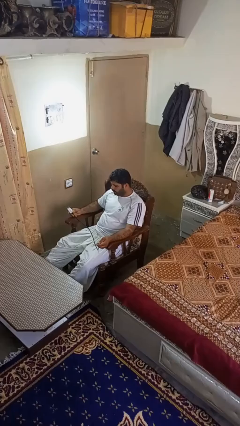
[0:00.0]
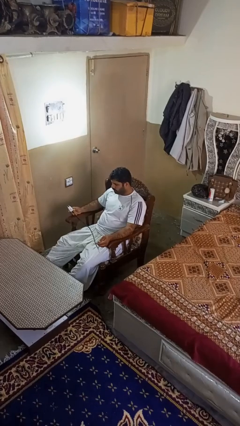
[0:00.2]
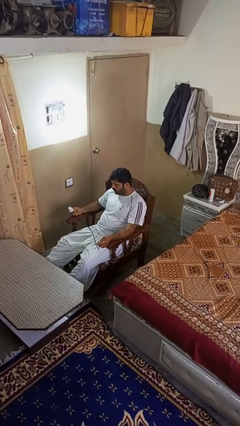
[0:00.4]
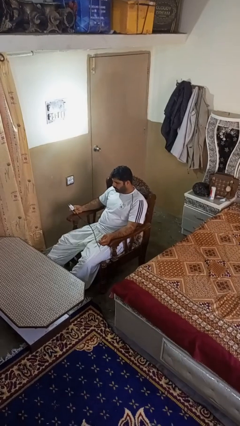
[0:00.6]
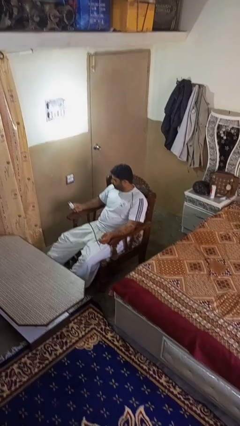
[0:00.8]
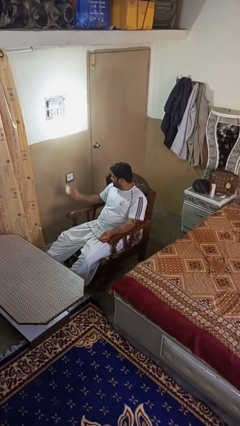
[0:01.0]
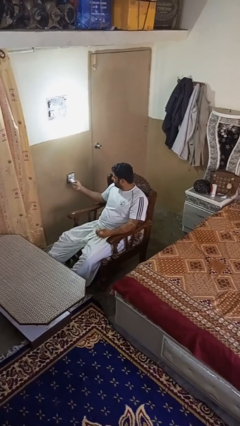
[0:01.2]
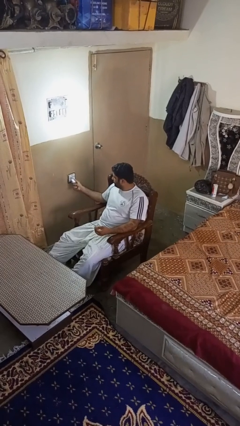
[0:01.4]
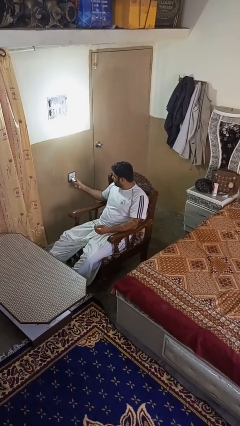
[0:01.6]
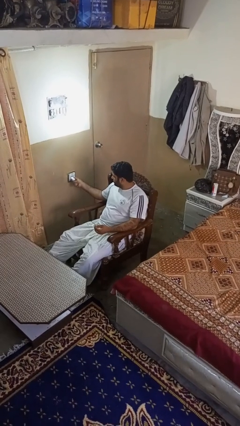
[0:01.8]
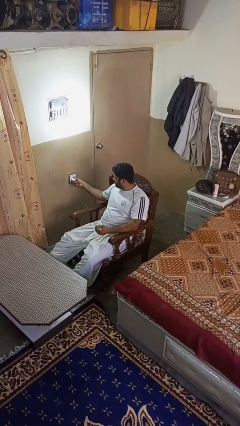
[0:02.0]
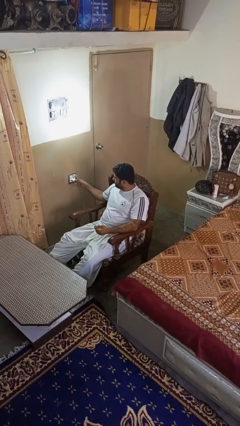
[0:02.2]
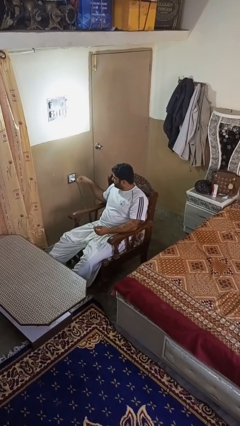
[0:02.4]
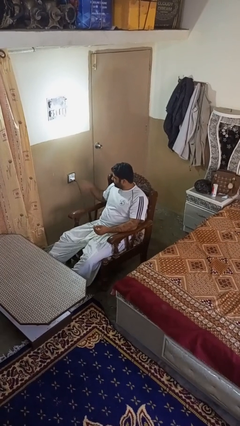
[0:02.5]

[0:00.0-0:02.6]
person plugs into electrical socket

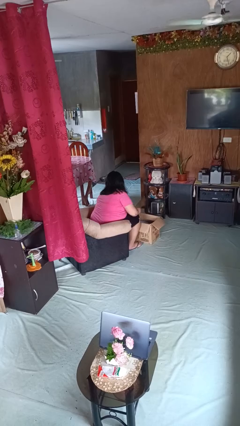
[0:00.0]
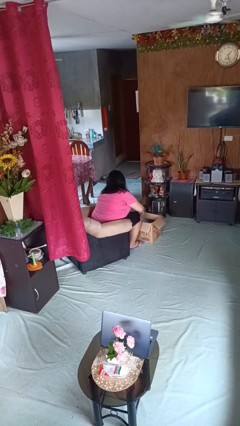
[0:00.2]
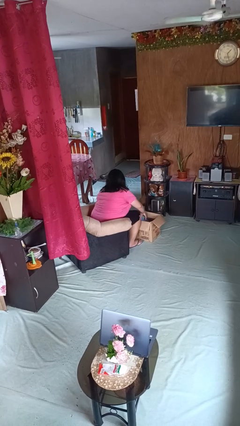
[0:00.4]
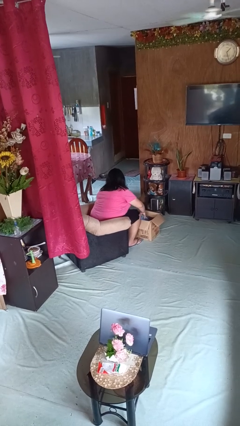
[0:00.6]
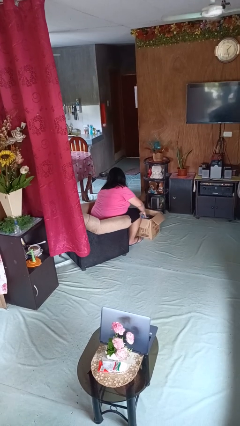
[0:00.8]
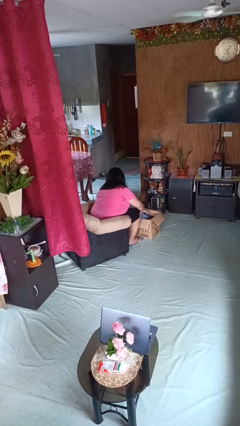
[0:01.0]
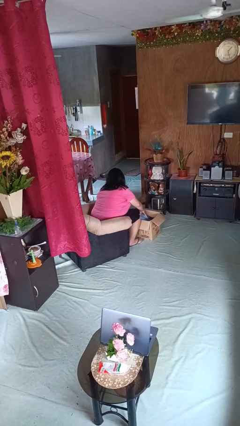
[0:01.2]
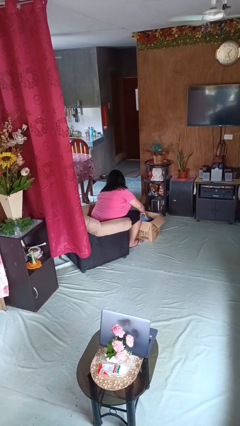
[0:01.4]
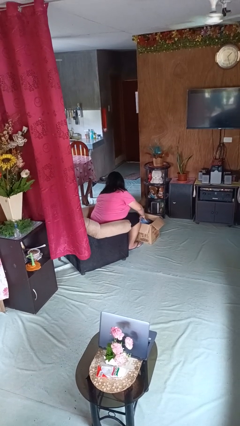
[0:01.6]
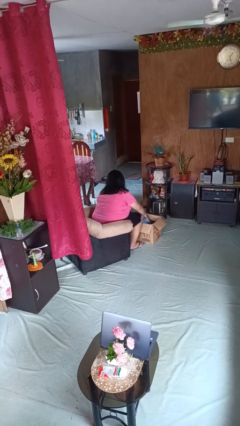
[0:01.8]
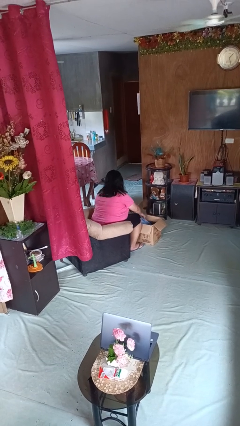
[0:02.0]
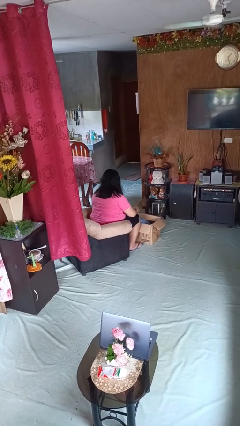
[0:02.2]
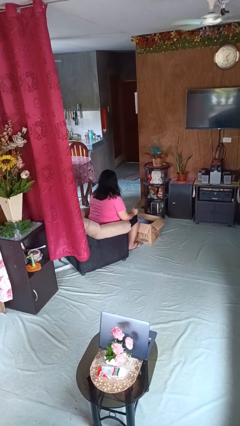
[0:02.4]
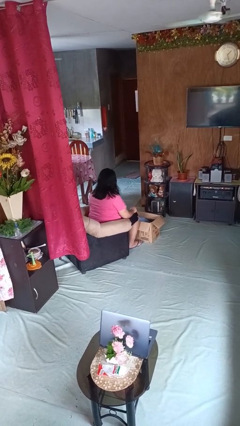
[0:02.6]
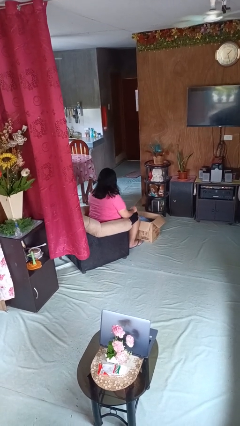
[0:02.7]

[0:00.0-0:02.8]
person searches in box

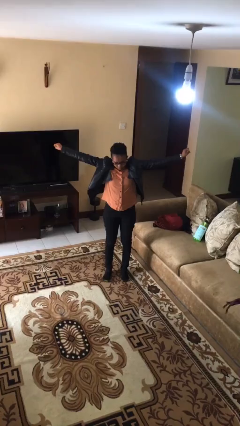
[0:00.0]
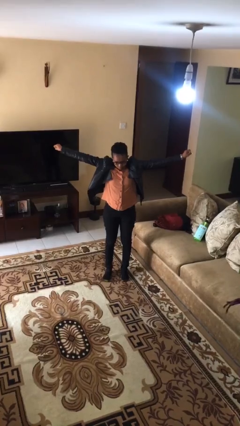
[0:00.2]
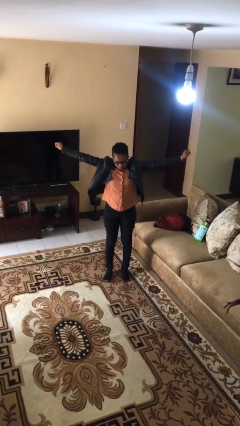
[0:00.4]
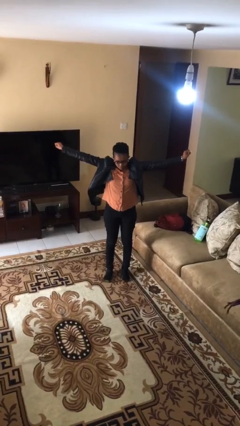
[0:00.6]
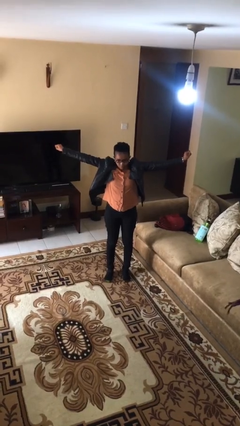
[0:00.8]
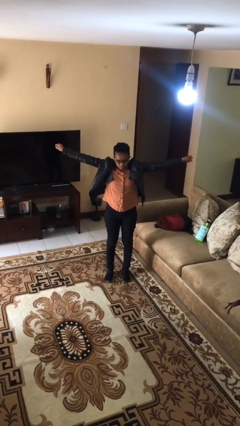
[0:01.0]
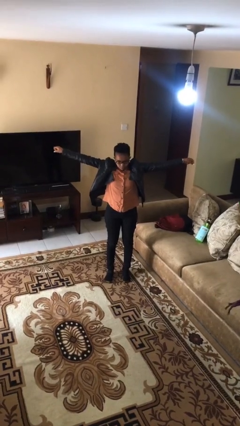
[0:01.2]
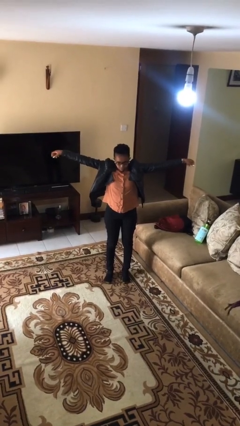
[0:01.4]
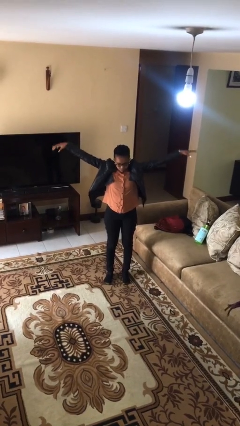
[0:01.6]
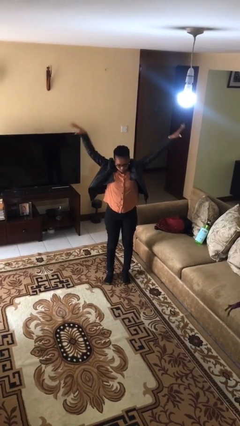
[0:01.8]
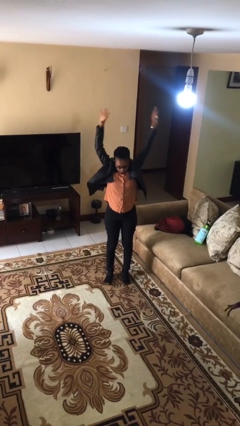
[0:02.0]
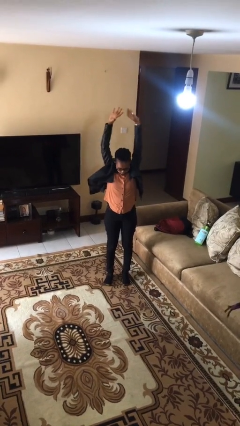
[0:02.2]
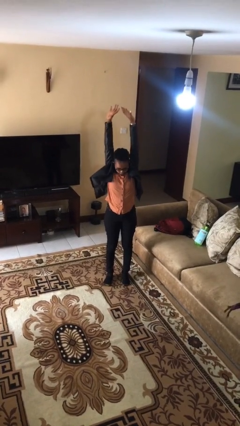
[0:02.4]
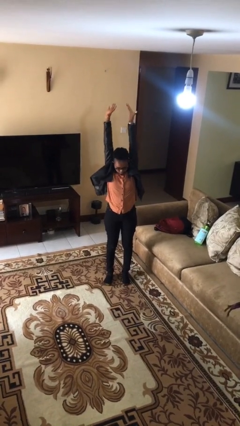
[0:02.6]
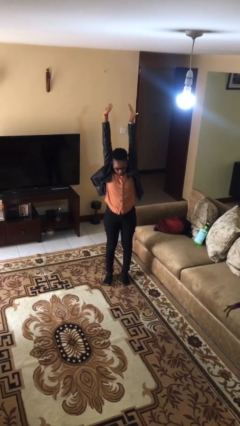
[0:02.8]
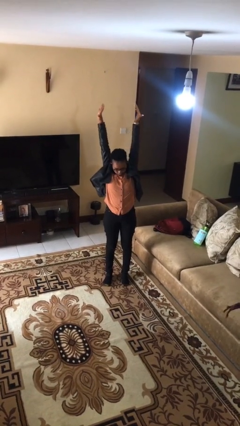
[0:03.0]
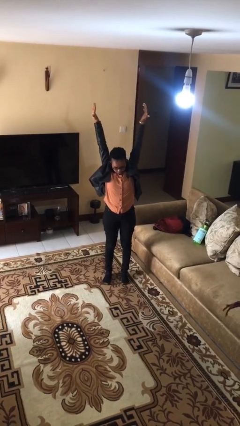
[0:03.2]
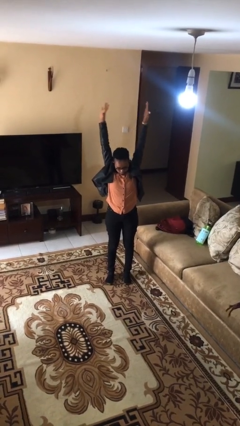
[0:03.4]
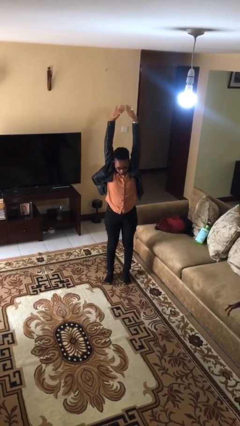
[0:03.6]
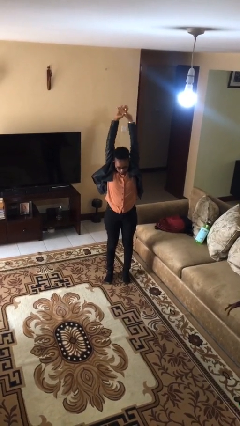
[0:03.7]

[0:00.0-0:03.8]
person stretches arms over head

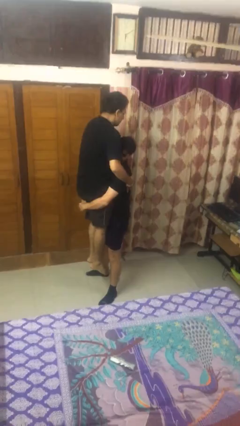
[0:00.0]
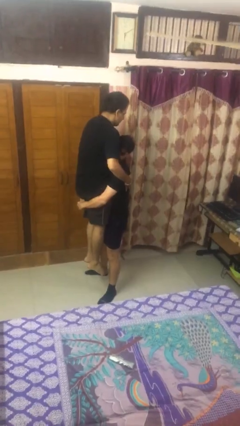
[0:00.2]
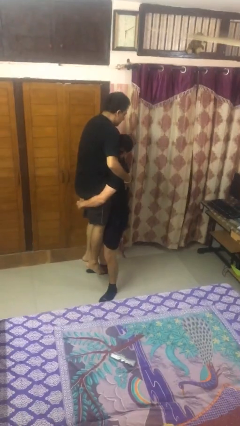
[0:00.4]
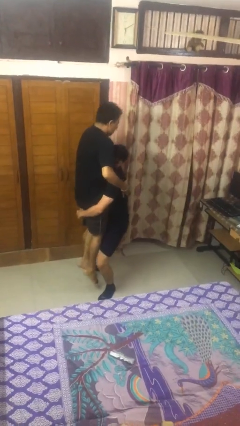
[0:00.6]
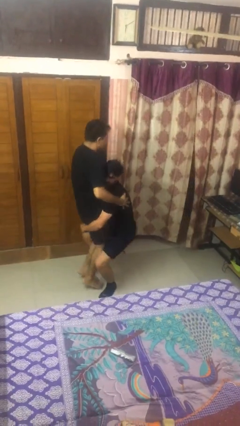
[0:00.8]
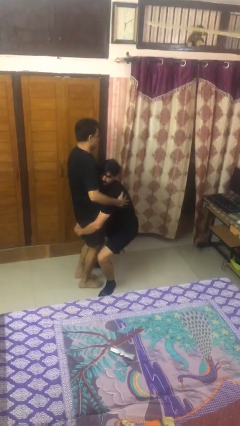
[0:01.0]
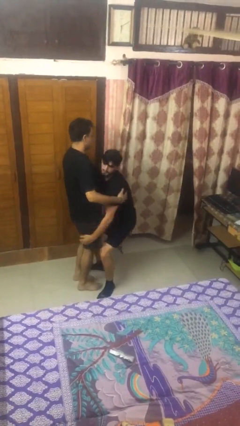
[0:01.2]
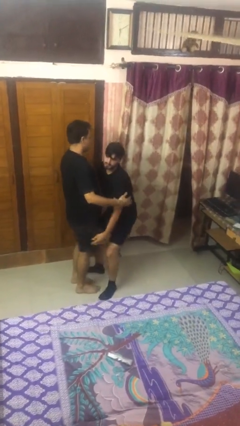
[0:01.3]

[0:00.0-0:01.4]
person puts down person

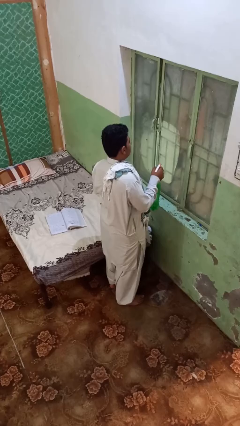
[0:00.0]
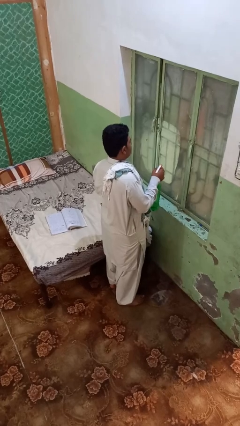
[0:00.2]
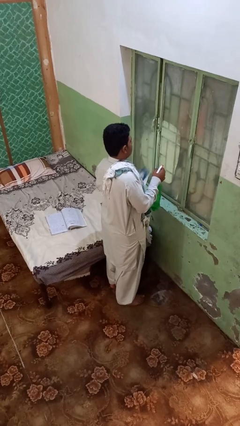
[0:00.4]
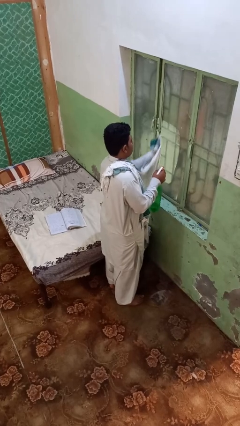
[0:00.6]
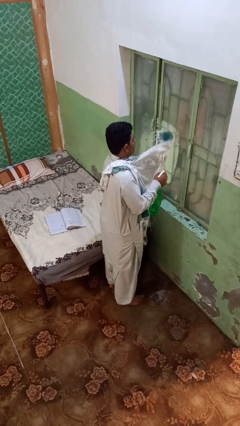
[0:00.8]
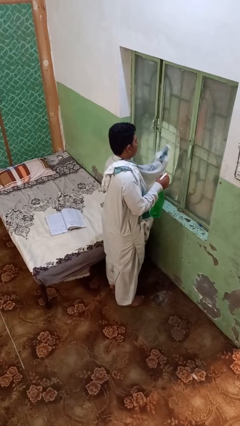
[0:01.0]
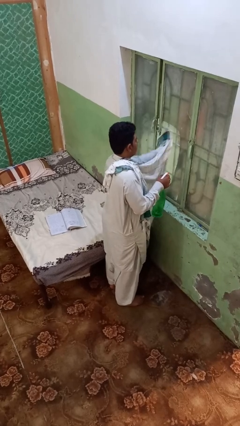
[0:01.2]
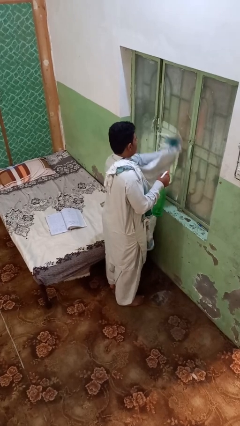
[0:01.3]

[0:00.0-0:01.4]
person washes window

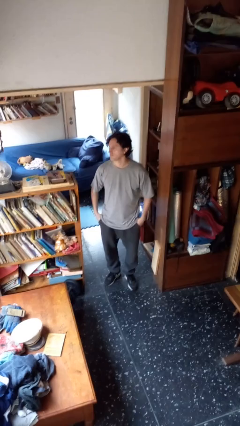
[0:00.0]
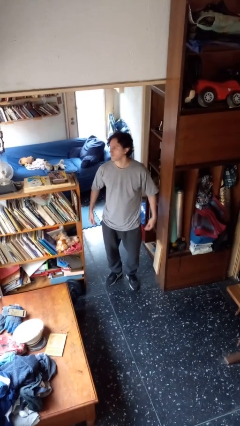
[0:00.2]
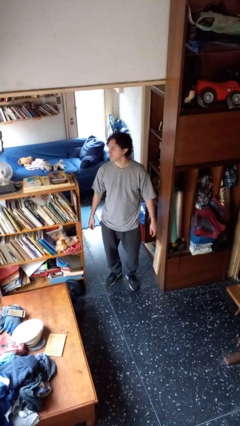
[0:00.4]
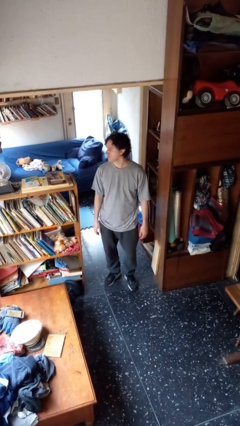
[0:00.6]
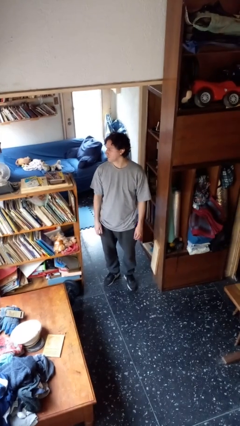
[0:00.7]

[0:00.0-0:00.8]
person puts hands in back pockets

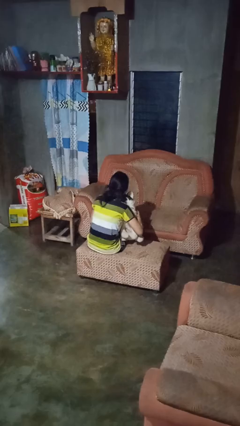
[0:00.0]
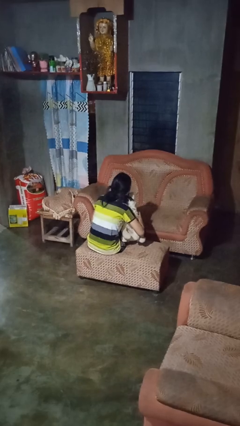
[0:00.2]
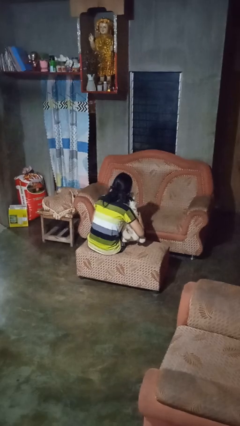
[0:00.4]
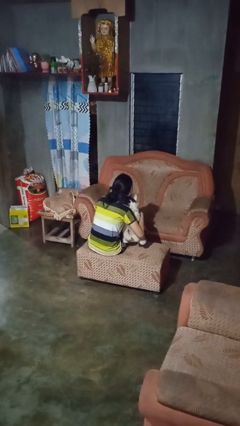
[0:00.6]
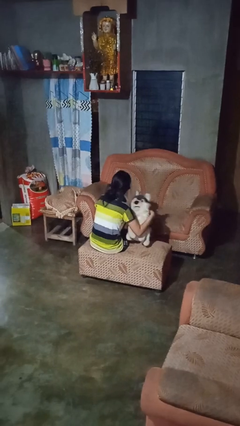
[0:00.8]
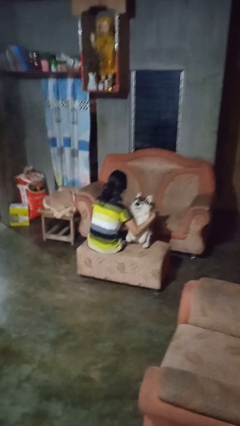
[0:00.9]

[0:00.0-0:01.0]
person hugs stuffed animal

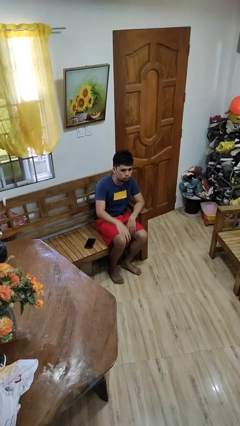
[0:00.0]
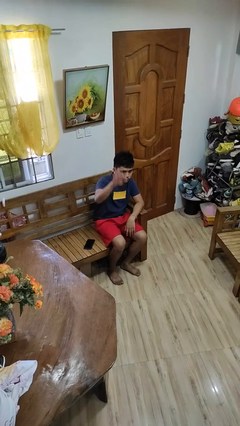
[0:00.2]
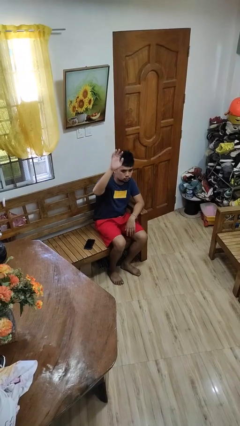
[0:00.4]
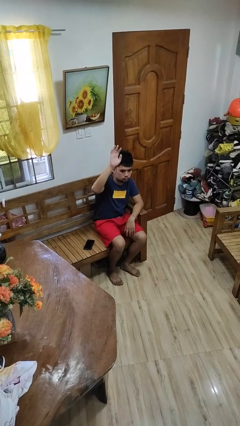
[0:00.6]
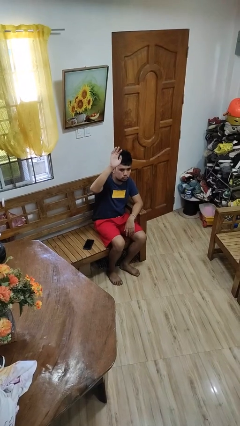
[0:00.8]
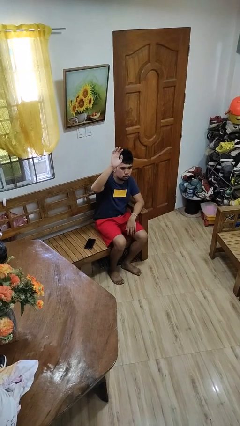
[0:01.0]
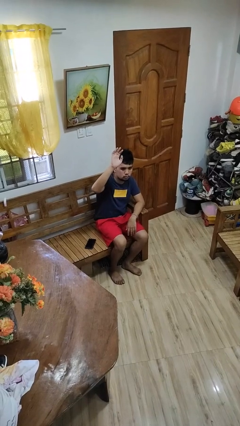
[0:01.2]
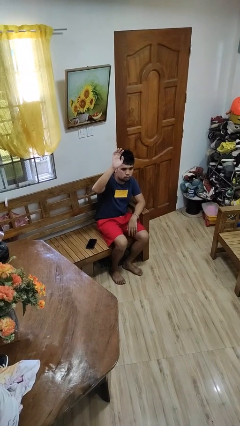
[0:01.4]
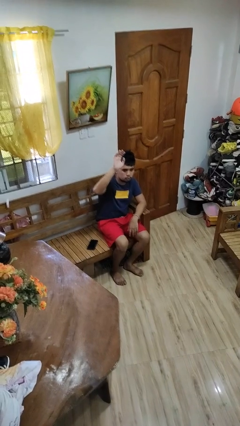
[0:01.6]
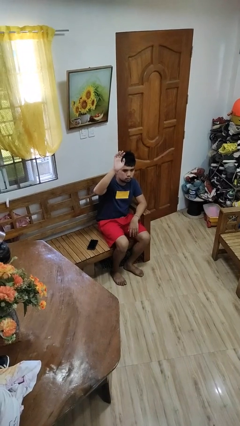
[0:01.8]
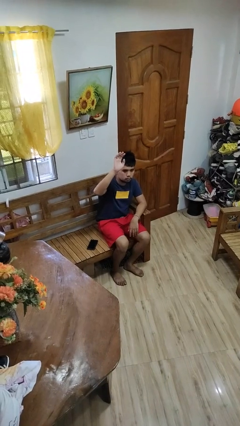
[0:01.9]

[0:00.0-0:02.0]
person gestures raise hand

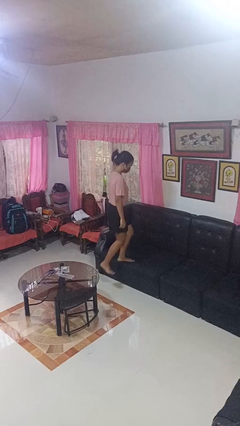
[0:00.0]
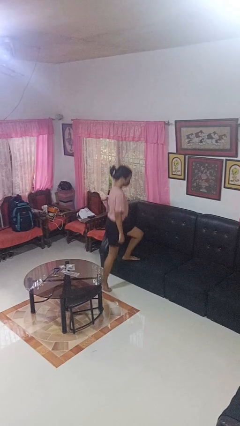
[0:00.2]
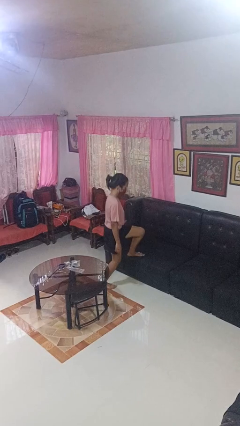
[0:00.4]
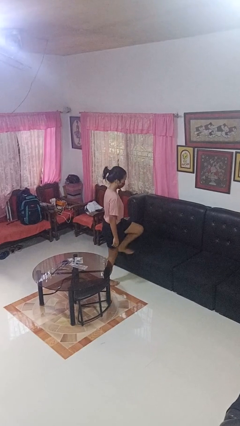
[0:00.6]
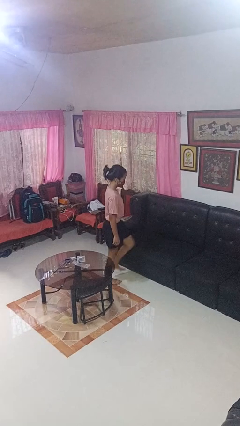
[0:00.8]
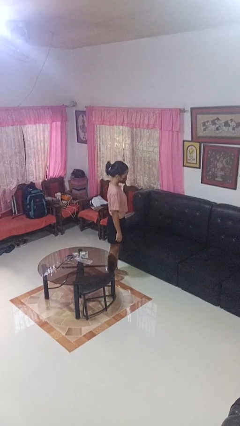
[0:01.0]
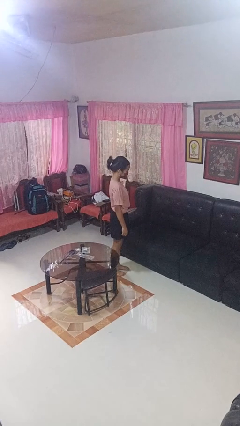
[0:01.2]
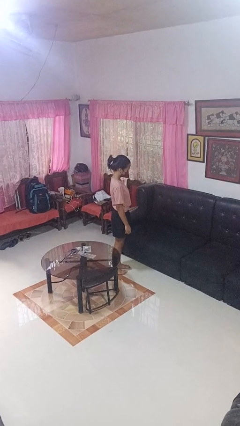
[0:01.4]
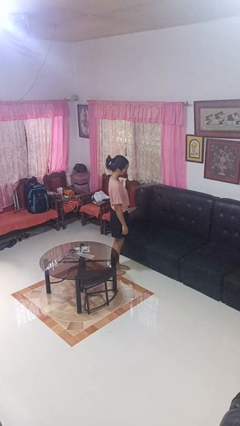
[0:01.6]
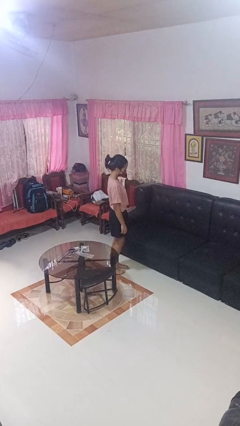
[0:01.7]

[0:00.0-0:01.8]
person climbs off couch
